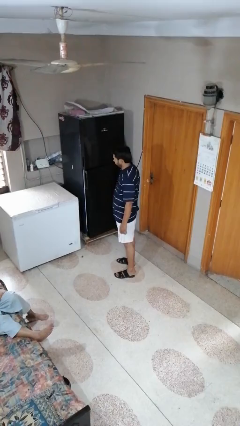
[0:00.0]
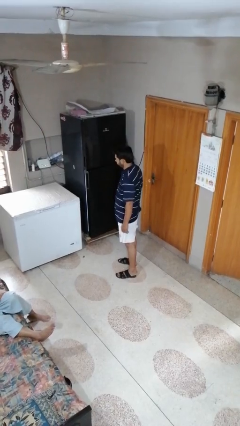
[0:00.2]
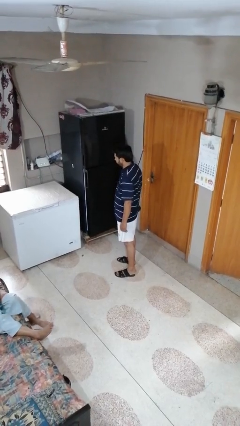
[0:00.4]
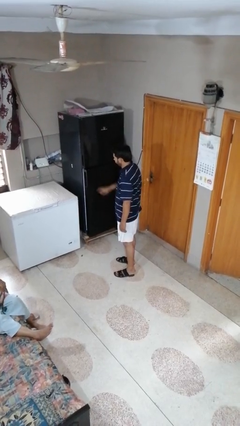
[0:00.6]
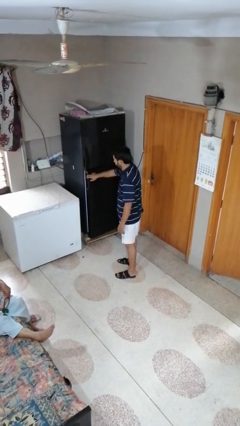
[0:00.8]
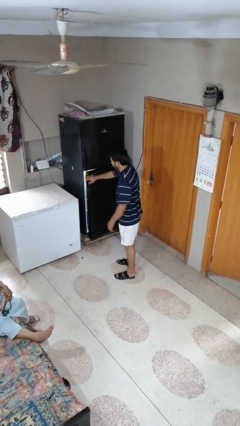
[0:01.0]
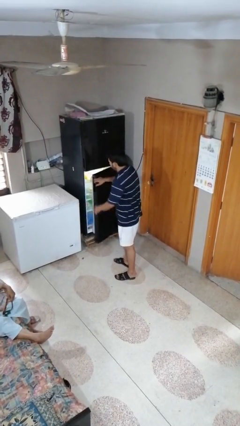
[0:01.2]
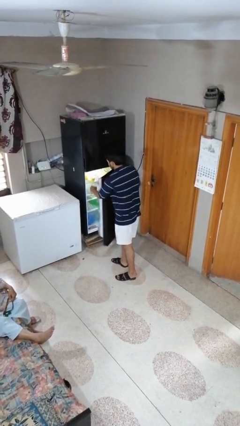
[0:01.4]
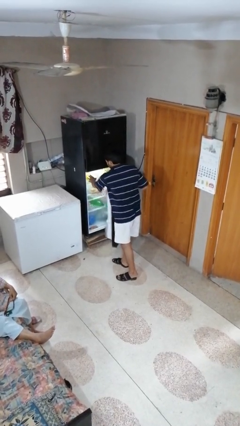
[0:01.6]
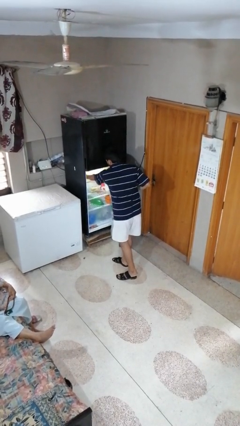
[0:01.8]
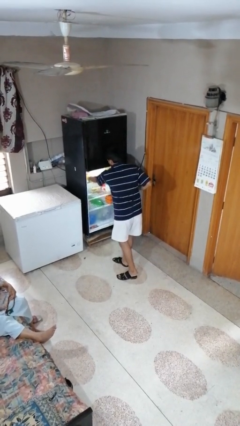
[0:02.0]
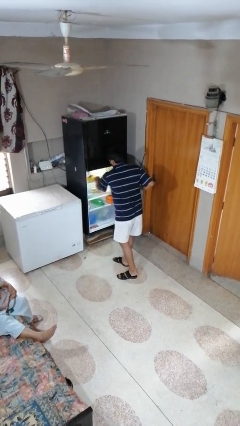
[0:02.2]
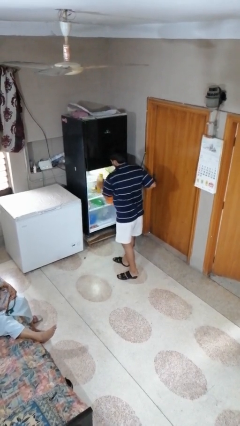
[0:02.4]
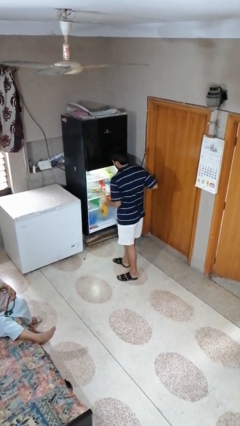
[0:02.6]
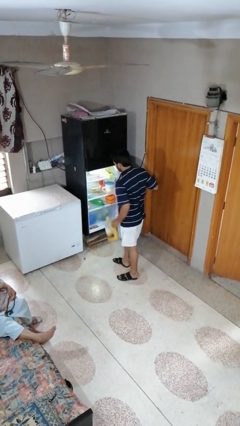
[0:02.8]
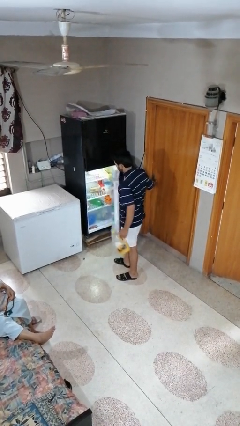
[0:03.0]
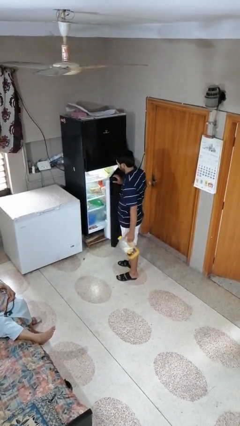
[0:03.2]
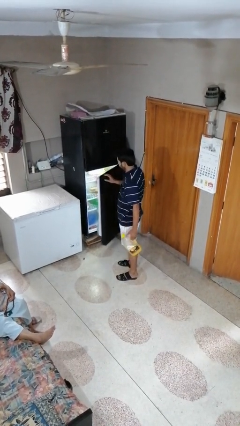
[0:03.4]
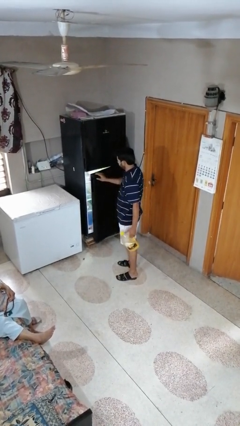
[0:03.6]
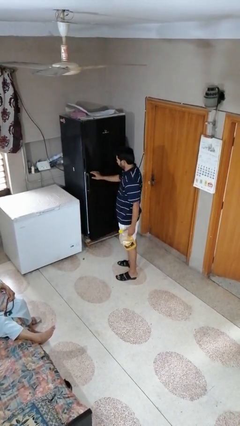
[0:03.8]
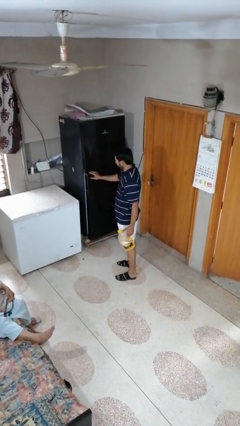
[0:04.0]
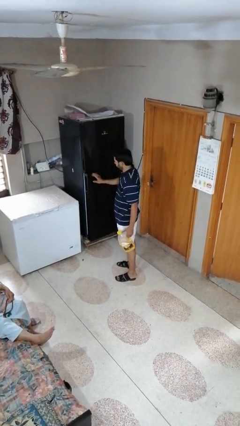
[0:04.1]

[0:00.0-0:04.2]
person takes object from refrigerator

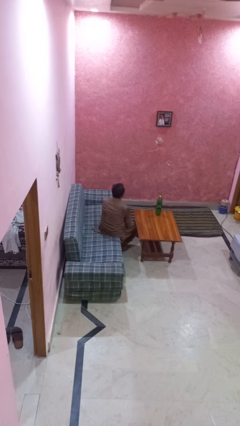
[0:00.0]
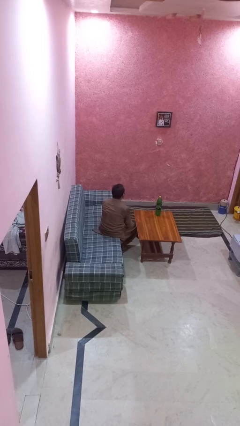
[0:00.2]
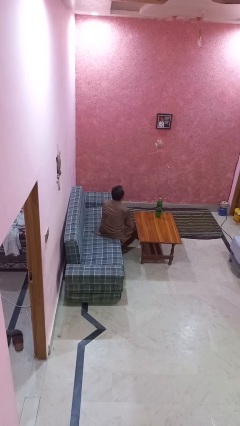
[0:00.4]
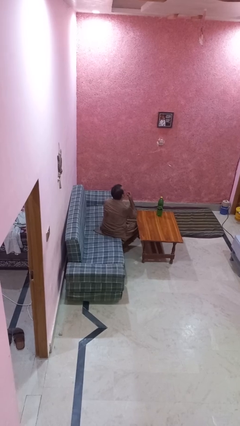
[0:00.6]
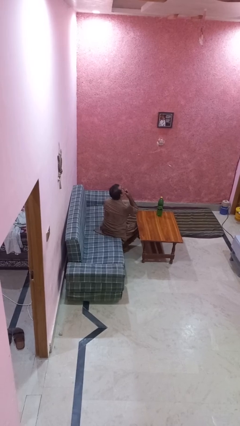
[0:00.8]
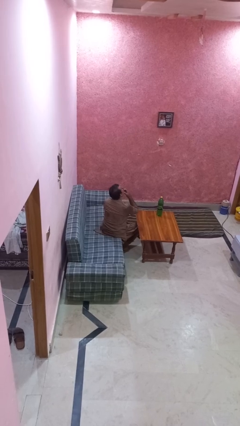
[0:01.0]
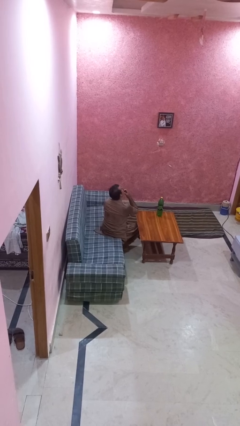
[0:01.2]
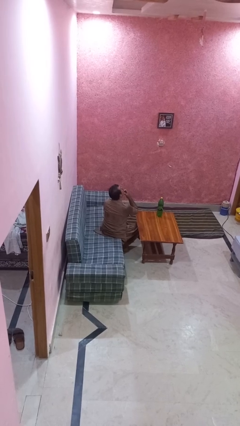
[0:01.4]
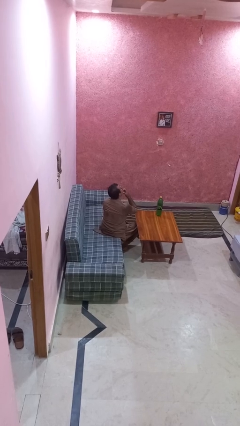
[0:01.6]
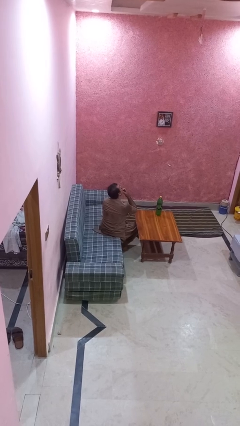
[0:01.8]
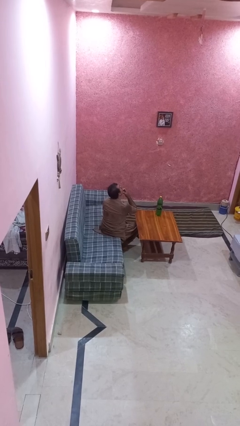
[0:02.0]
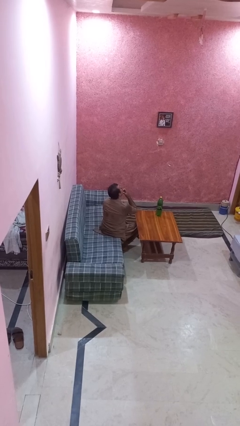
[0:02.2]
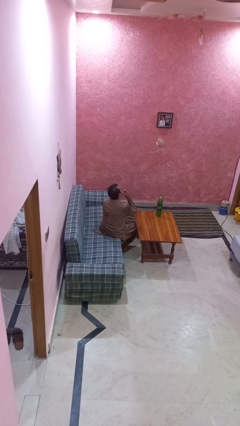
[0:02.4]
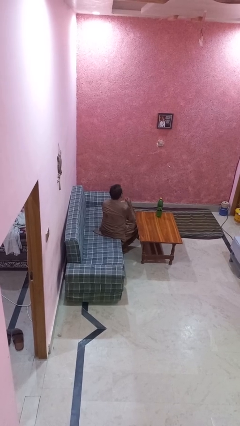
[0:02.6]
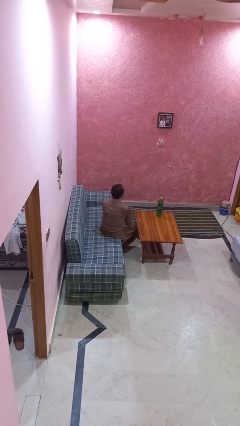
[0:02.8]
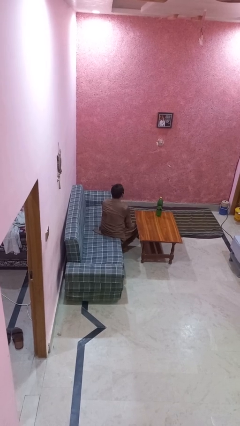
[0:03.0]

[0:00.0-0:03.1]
person strokes chin

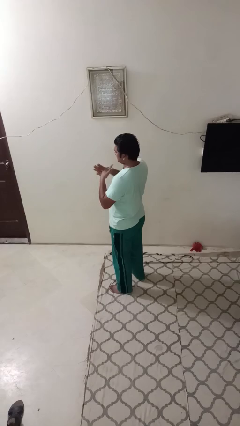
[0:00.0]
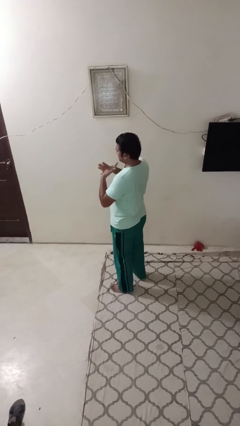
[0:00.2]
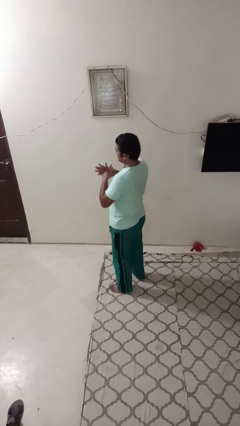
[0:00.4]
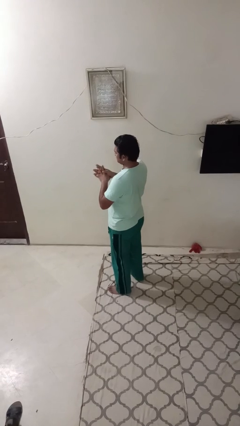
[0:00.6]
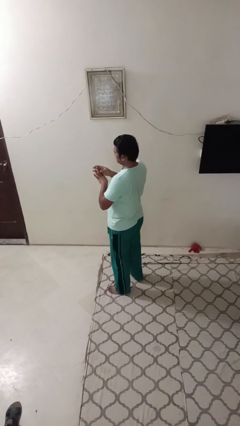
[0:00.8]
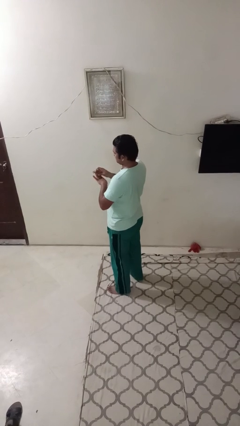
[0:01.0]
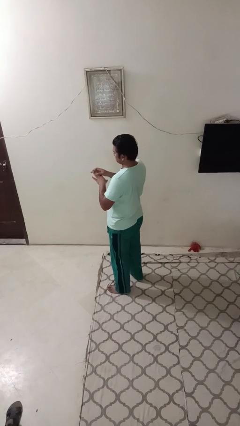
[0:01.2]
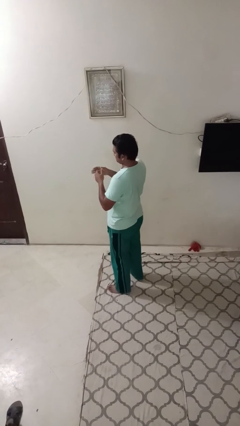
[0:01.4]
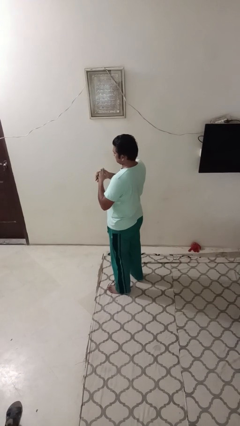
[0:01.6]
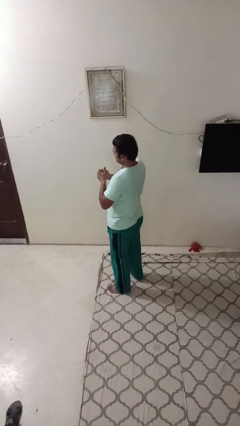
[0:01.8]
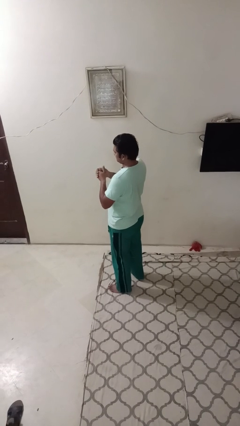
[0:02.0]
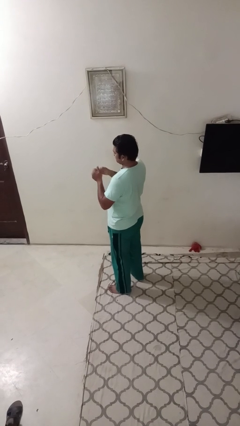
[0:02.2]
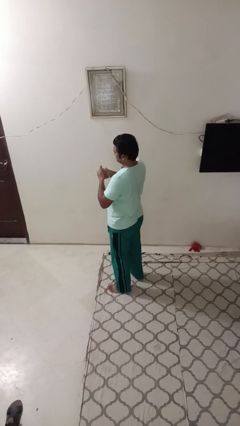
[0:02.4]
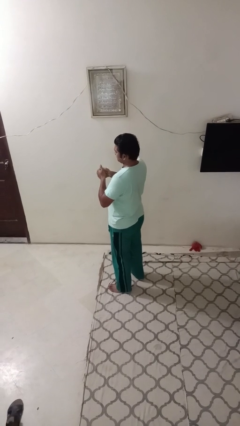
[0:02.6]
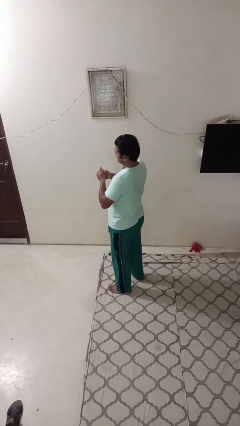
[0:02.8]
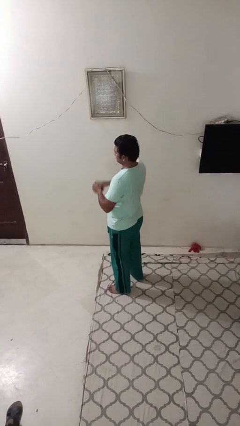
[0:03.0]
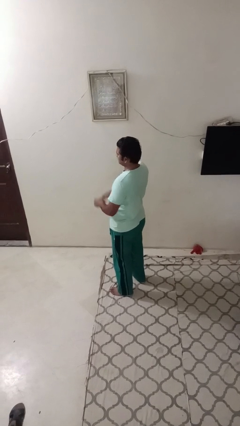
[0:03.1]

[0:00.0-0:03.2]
person cracks knuckles

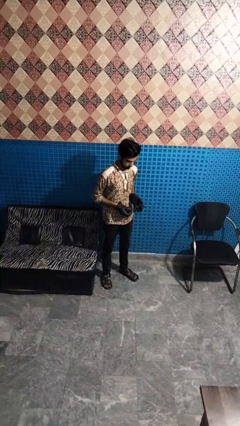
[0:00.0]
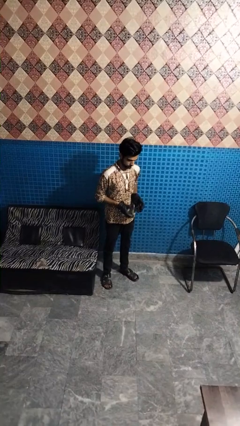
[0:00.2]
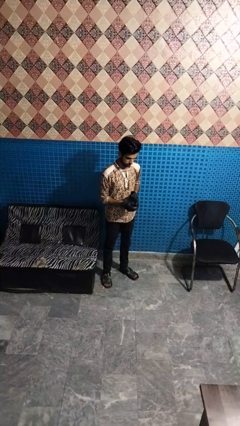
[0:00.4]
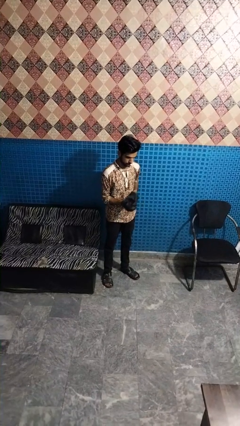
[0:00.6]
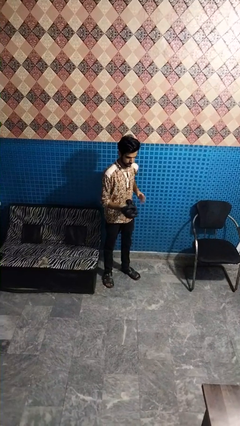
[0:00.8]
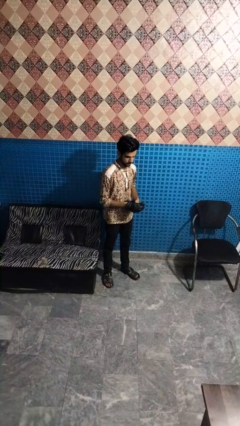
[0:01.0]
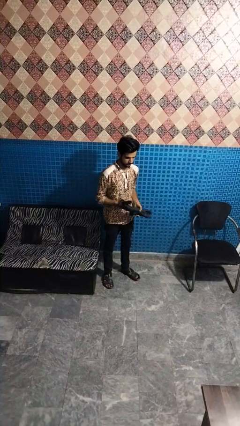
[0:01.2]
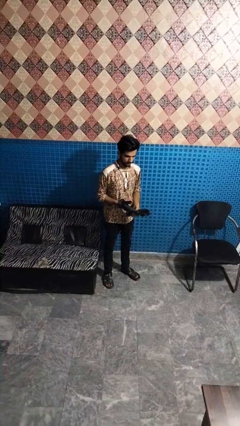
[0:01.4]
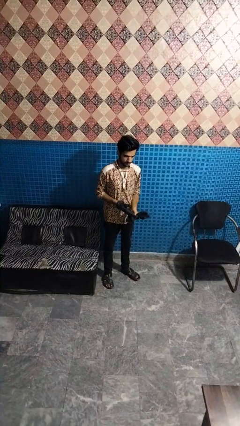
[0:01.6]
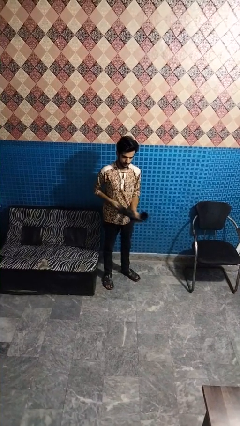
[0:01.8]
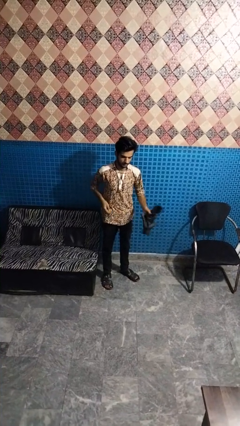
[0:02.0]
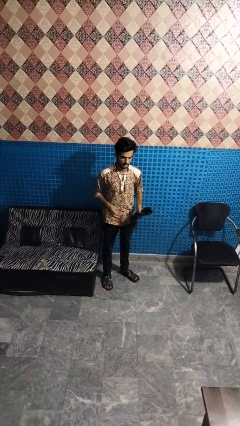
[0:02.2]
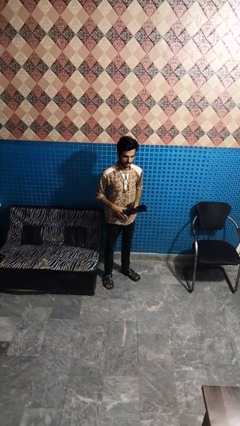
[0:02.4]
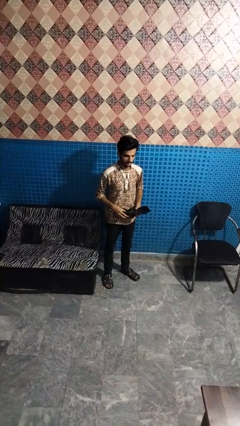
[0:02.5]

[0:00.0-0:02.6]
person takes off gloves

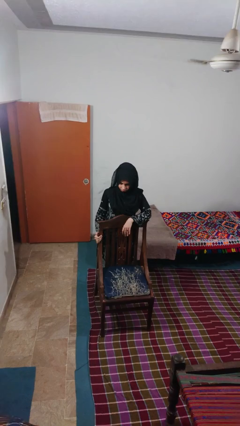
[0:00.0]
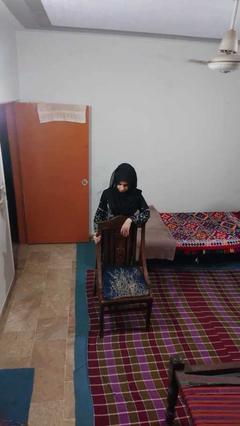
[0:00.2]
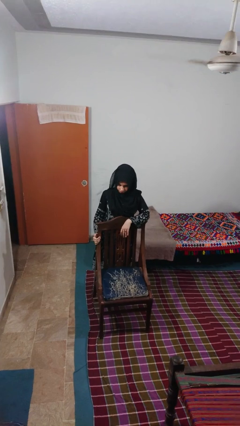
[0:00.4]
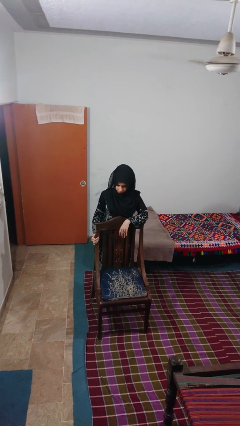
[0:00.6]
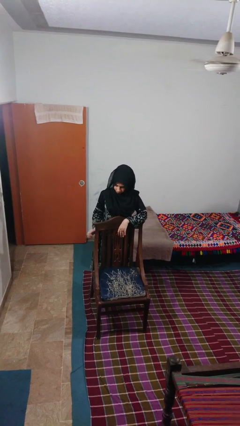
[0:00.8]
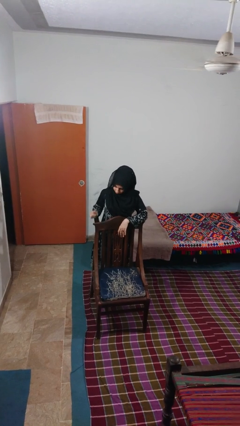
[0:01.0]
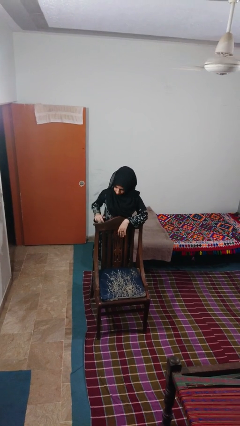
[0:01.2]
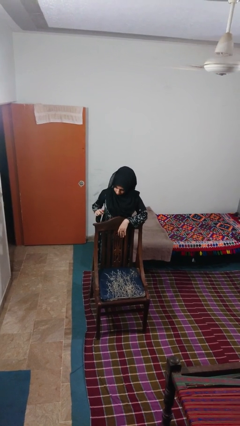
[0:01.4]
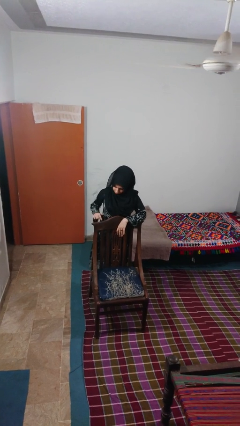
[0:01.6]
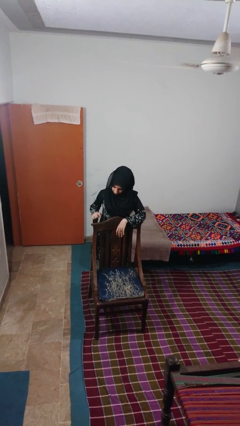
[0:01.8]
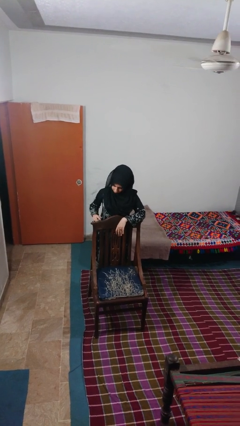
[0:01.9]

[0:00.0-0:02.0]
person taps object with finger

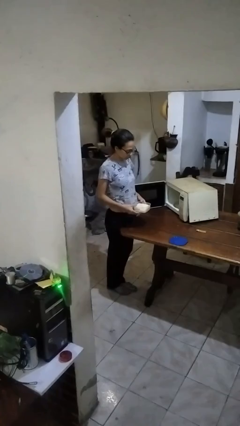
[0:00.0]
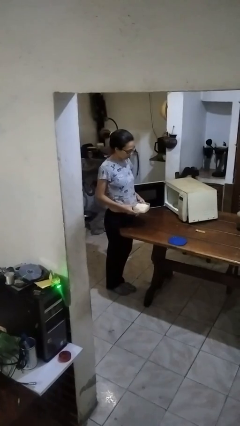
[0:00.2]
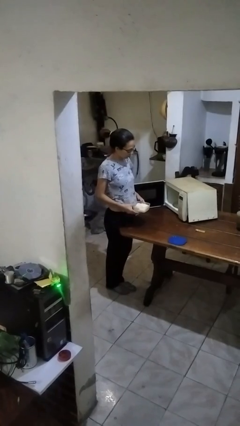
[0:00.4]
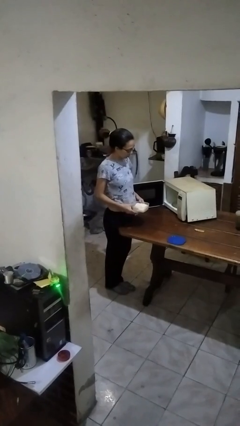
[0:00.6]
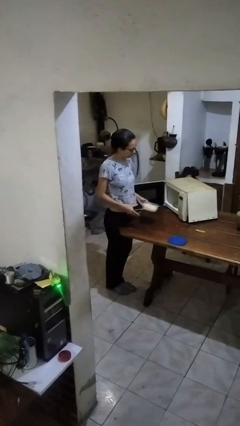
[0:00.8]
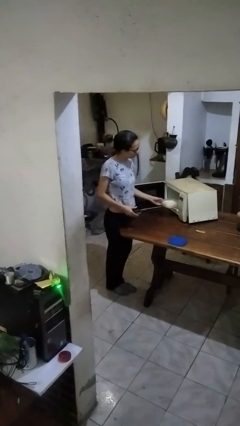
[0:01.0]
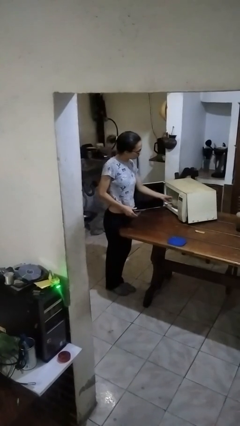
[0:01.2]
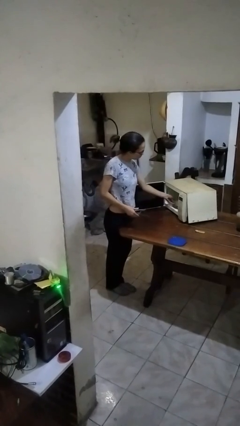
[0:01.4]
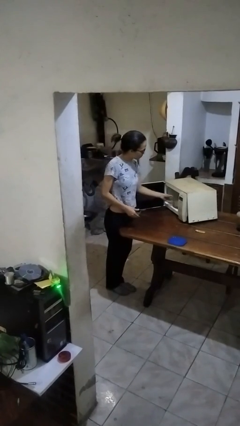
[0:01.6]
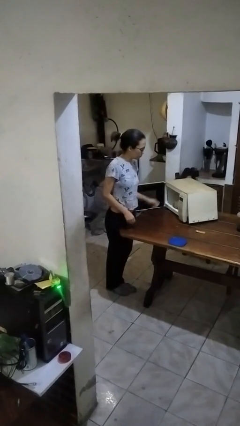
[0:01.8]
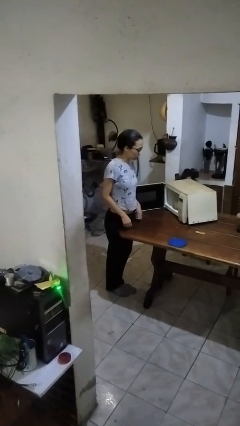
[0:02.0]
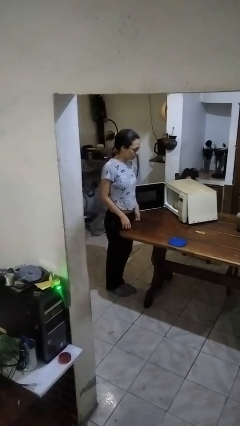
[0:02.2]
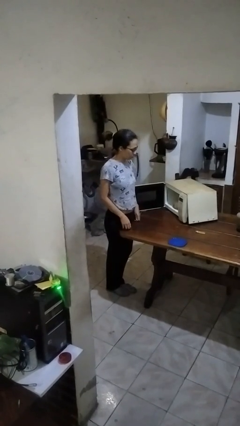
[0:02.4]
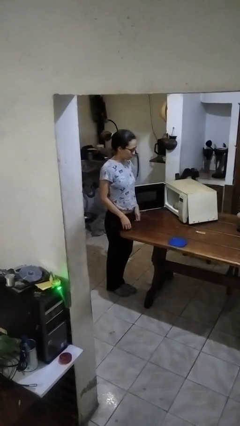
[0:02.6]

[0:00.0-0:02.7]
person puts object into microwave
